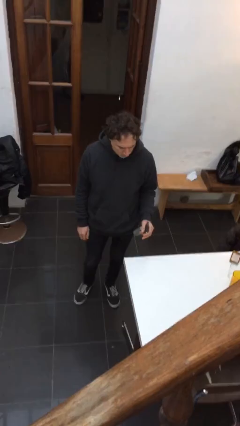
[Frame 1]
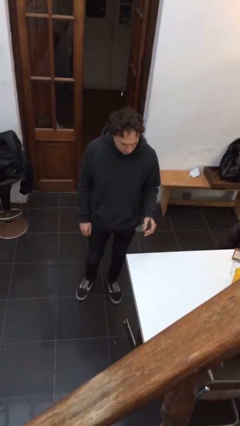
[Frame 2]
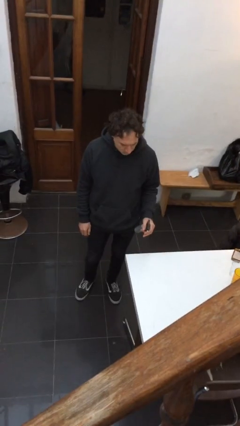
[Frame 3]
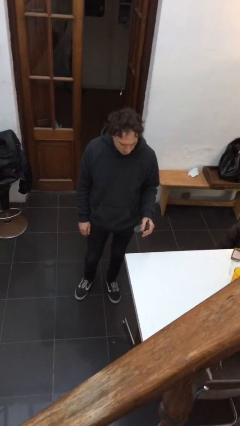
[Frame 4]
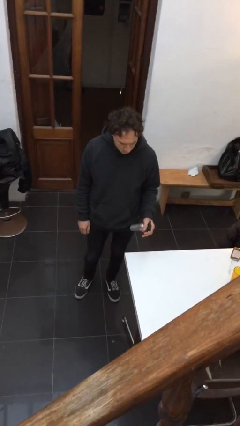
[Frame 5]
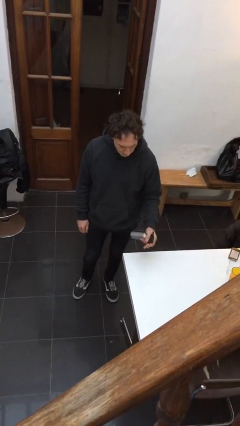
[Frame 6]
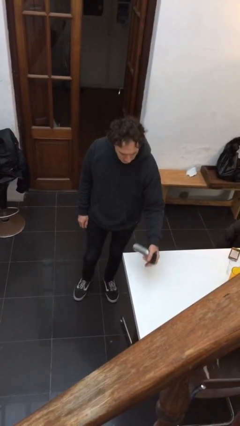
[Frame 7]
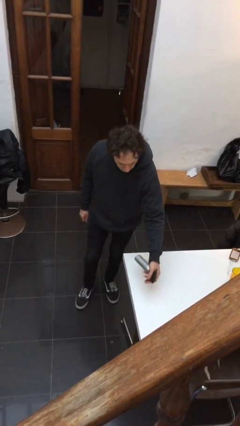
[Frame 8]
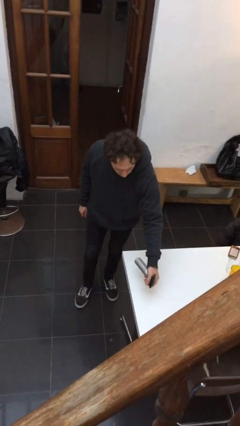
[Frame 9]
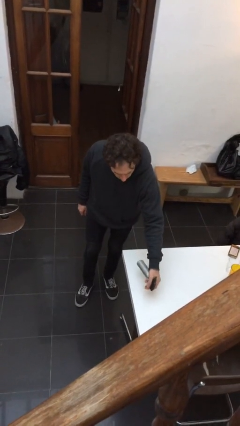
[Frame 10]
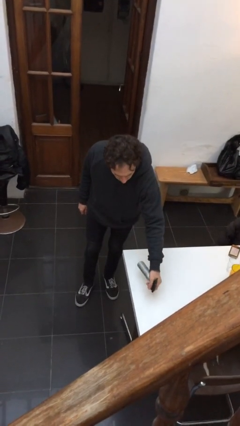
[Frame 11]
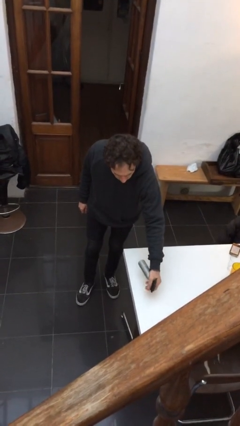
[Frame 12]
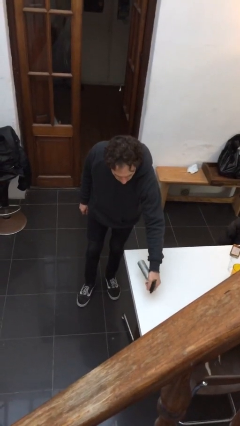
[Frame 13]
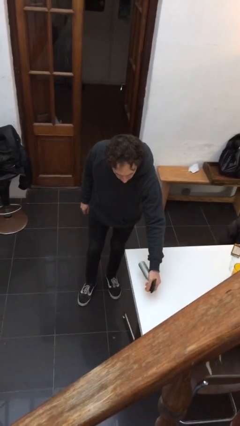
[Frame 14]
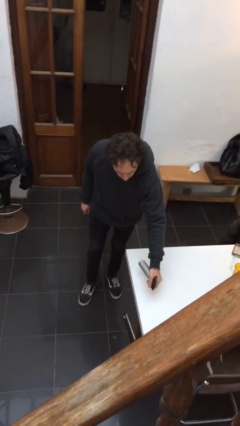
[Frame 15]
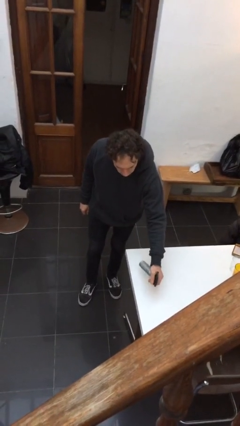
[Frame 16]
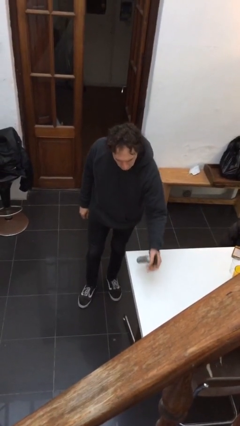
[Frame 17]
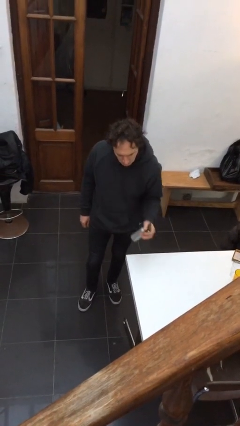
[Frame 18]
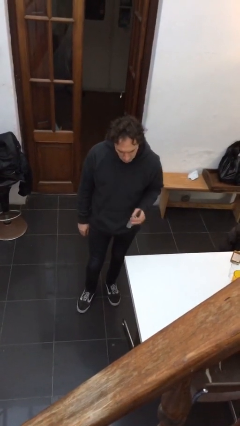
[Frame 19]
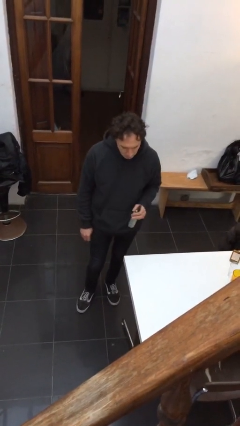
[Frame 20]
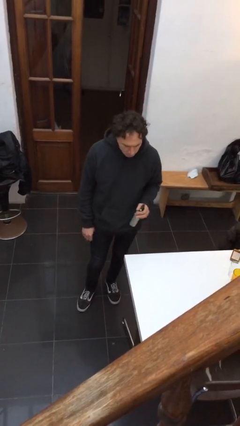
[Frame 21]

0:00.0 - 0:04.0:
person sprays from bottle

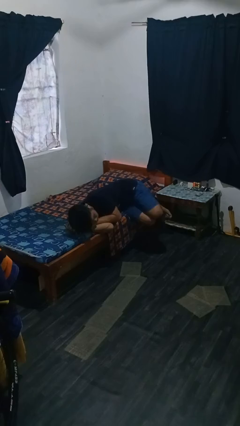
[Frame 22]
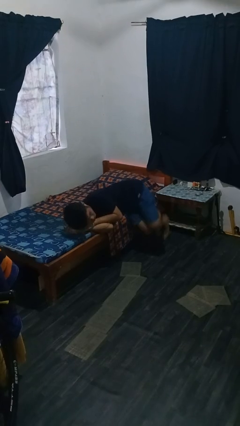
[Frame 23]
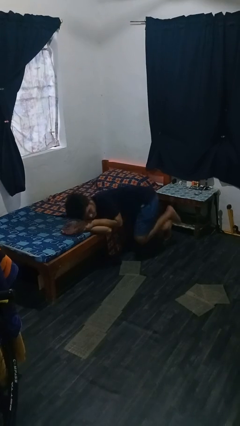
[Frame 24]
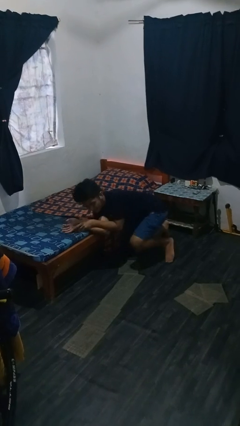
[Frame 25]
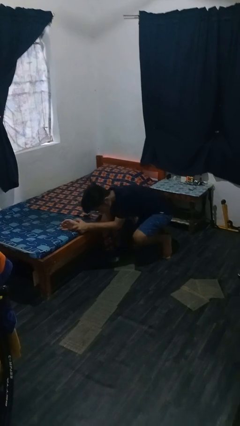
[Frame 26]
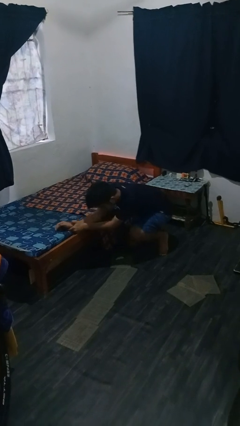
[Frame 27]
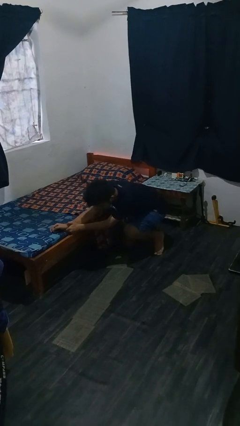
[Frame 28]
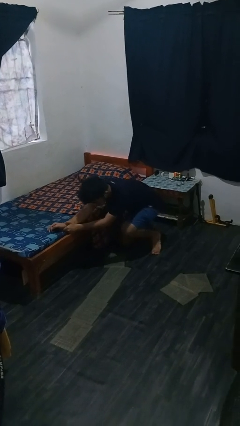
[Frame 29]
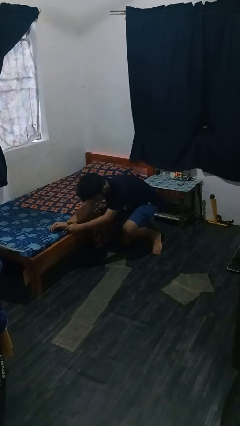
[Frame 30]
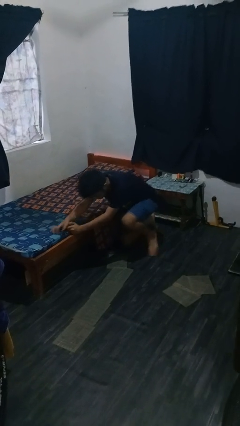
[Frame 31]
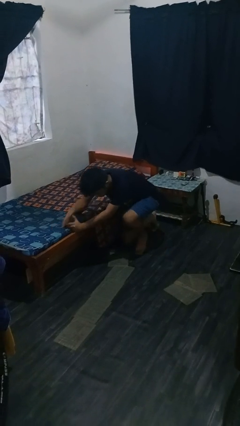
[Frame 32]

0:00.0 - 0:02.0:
person falls from bed

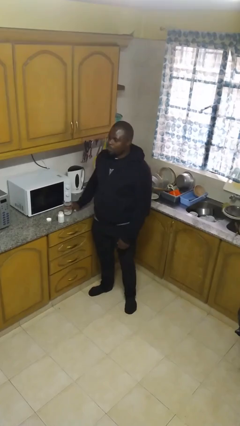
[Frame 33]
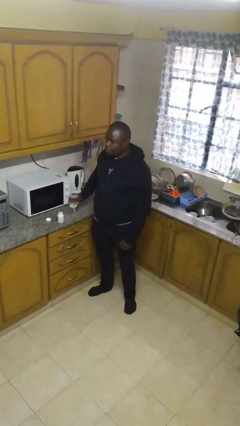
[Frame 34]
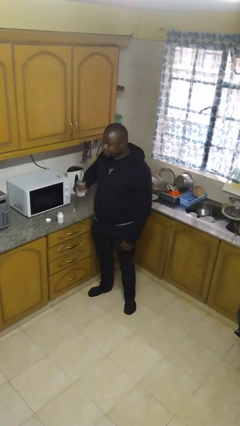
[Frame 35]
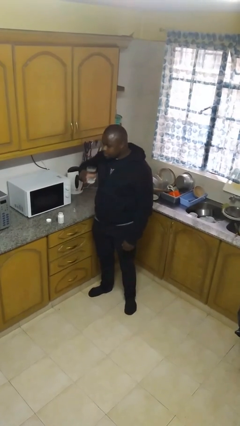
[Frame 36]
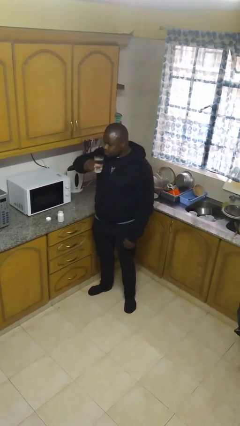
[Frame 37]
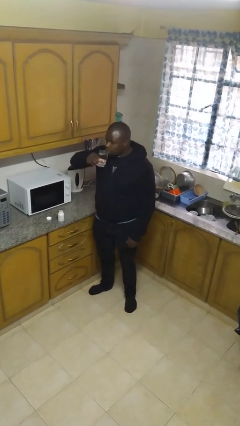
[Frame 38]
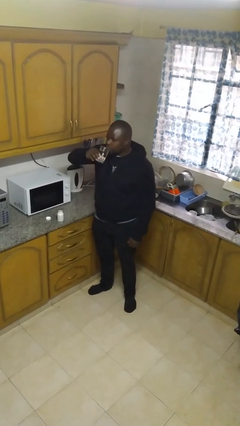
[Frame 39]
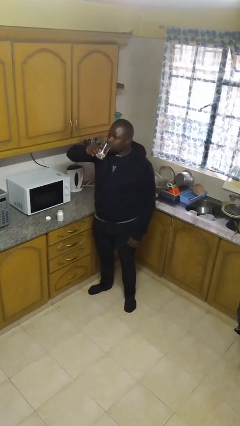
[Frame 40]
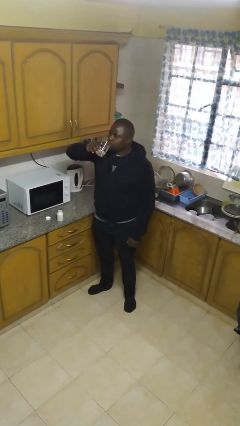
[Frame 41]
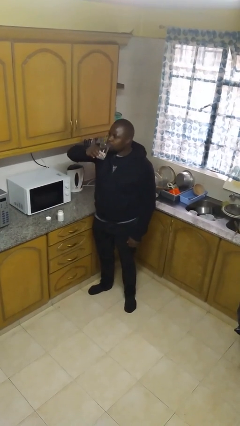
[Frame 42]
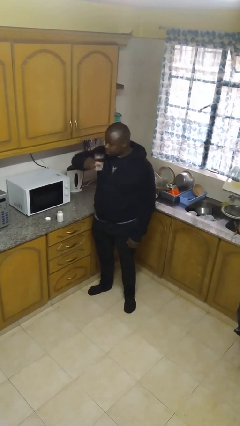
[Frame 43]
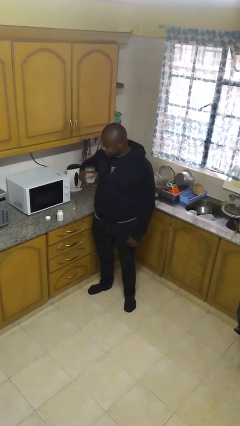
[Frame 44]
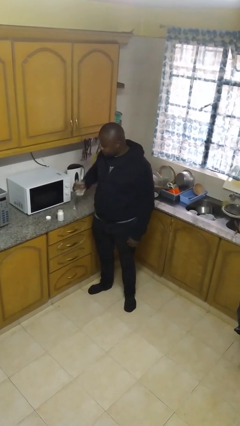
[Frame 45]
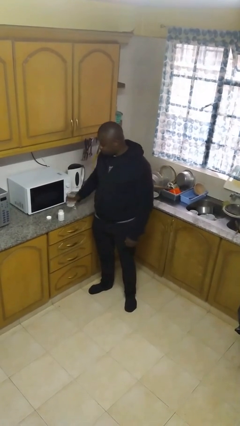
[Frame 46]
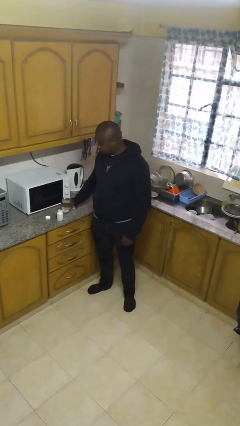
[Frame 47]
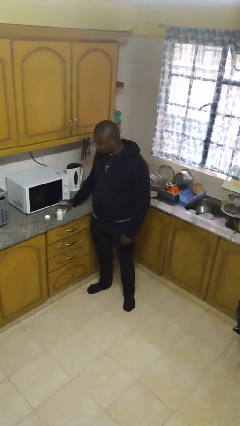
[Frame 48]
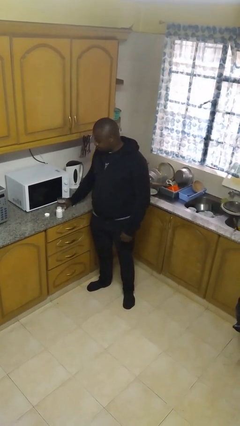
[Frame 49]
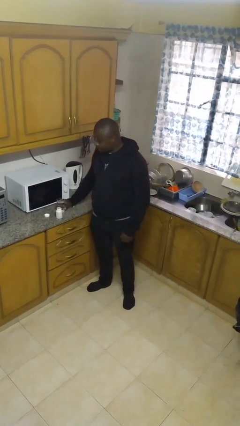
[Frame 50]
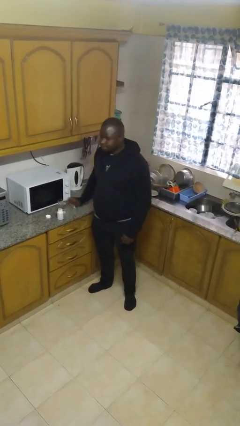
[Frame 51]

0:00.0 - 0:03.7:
person drinks from cup

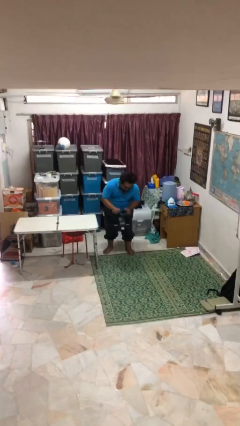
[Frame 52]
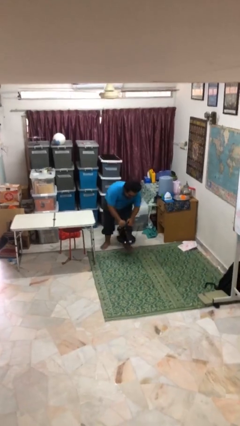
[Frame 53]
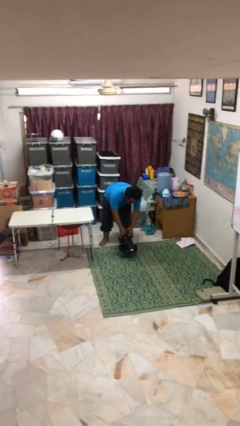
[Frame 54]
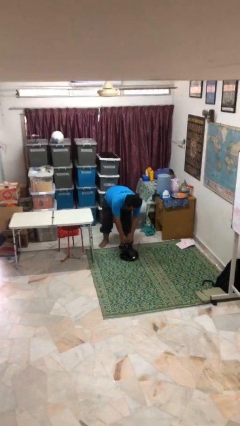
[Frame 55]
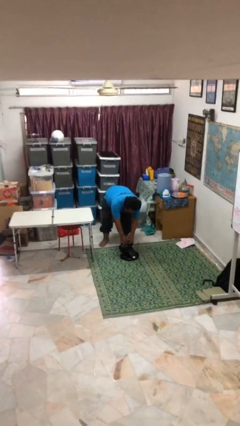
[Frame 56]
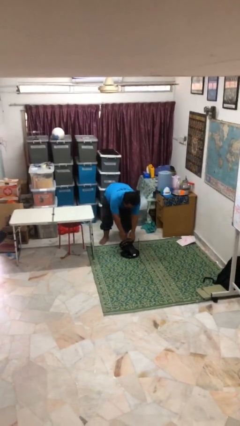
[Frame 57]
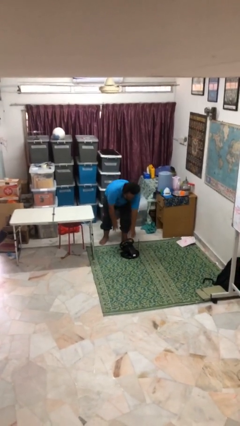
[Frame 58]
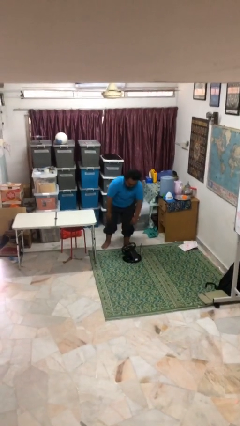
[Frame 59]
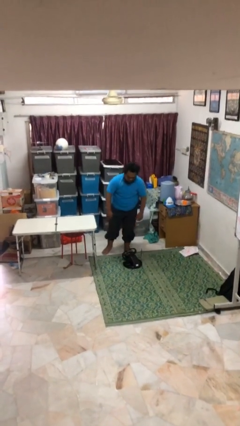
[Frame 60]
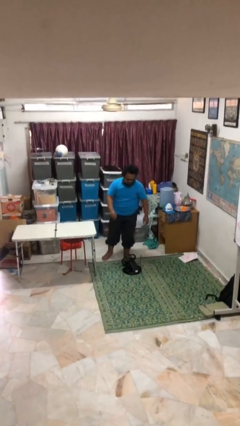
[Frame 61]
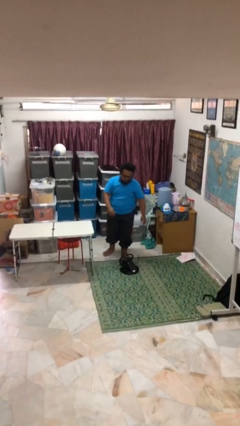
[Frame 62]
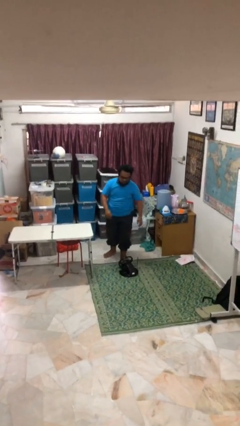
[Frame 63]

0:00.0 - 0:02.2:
person puts down object on floor

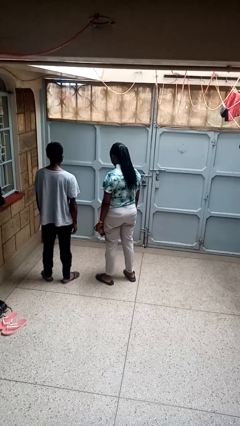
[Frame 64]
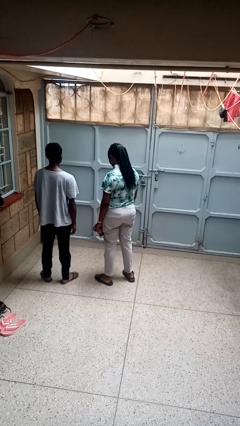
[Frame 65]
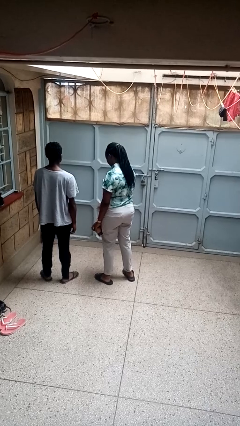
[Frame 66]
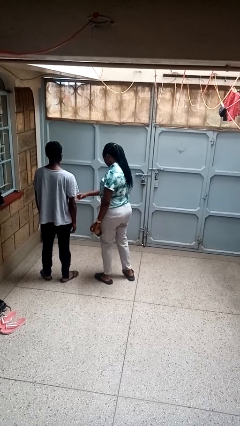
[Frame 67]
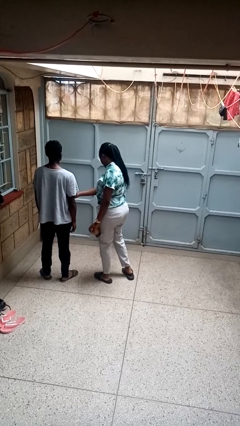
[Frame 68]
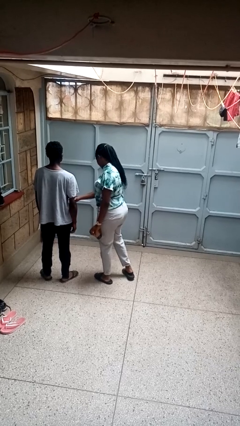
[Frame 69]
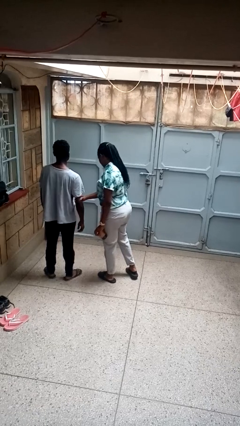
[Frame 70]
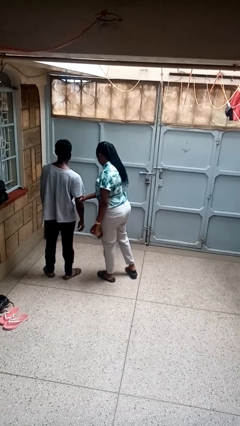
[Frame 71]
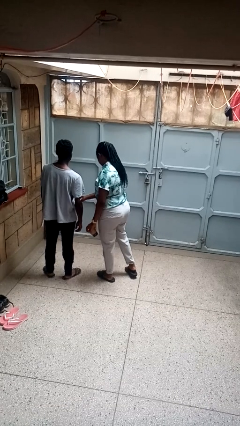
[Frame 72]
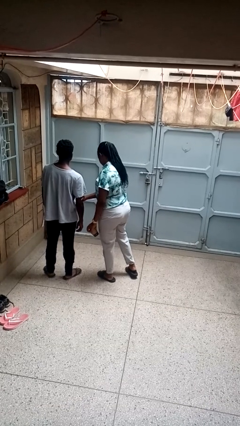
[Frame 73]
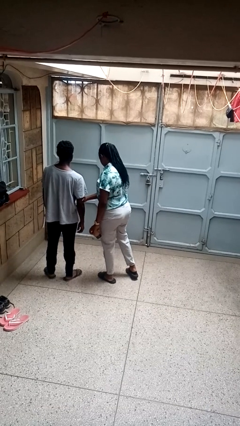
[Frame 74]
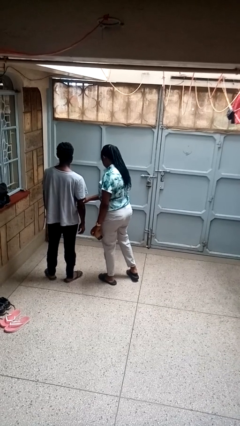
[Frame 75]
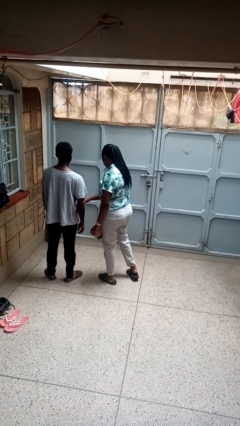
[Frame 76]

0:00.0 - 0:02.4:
person grabs person by bicep

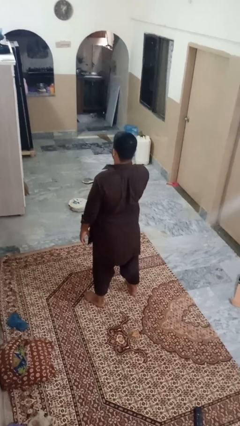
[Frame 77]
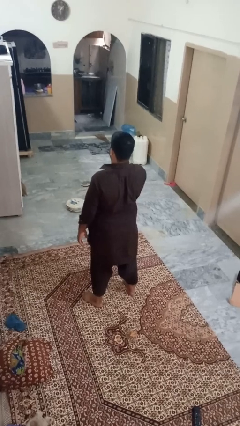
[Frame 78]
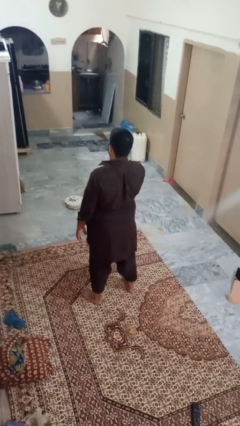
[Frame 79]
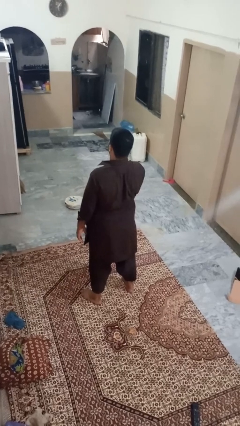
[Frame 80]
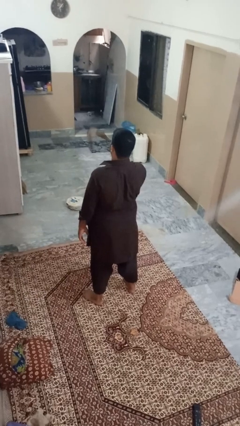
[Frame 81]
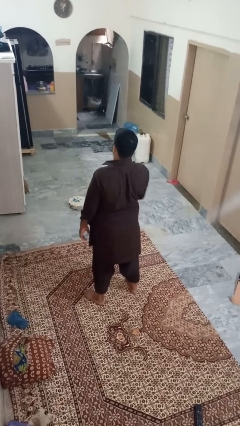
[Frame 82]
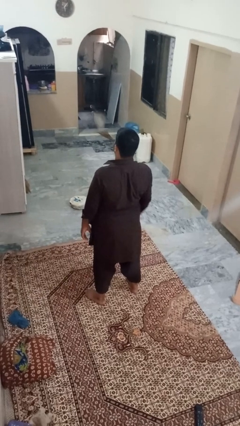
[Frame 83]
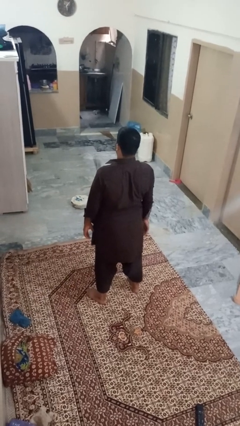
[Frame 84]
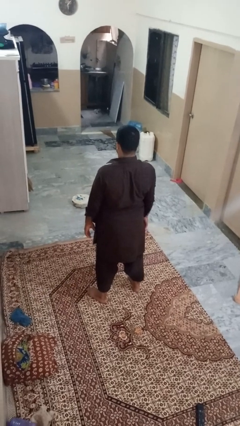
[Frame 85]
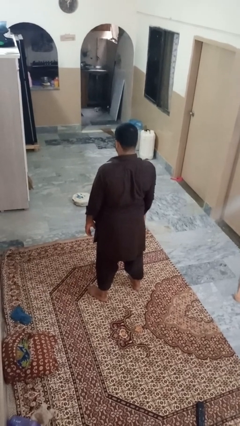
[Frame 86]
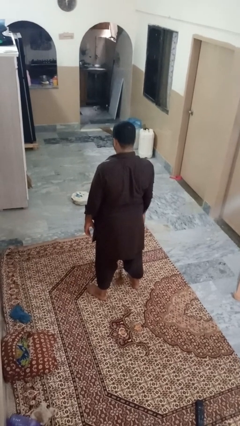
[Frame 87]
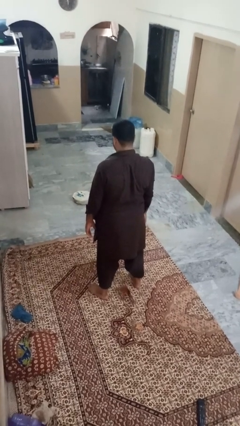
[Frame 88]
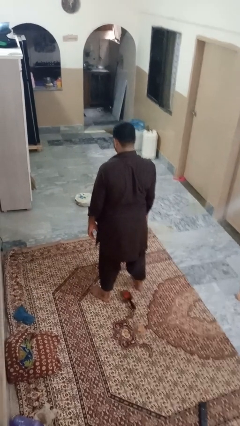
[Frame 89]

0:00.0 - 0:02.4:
person throws object into air

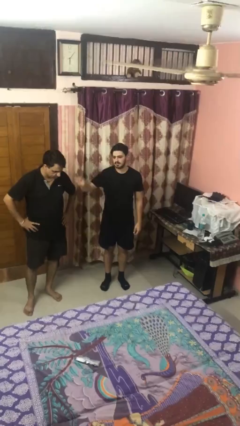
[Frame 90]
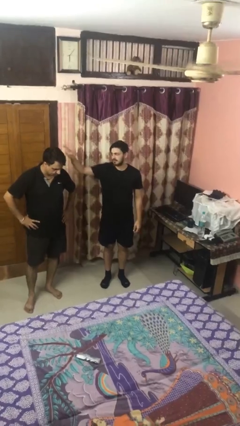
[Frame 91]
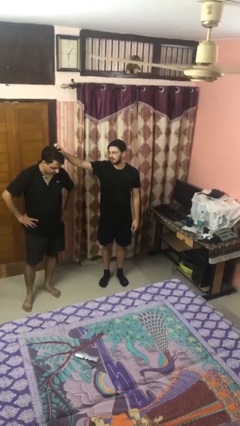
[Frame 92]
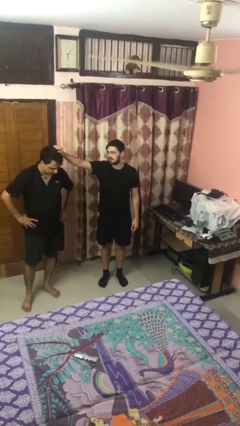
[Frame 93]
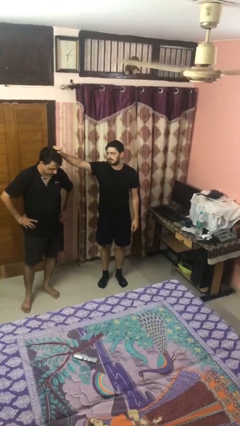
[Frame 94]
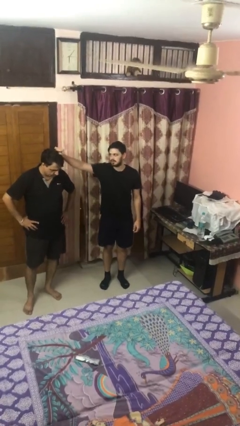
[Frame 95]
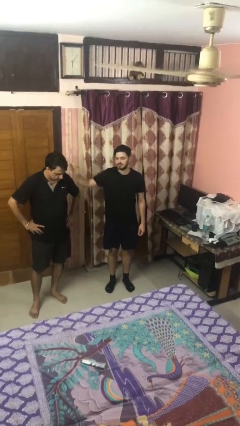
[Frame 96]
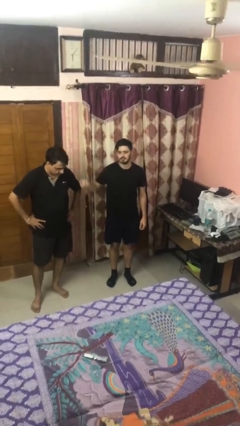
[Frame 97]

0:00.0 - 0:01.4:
person grabs person by hair
